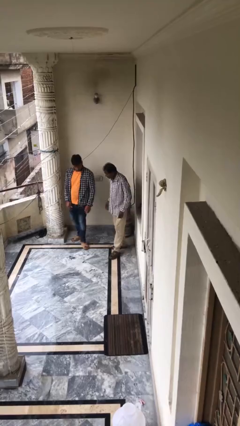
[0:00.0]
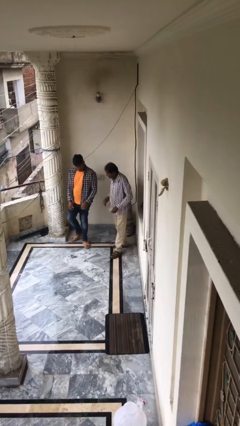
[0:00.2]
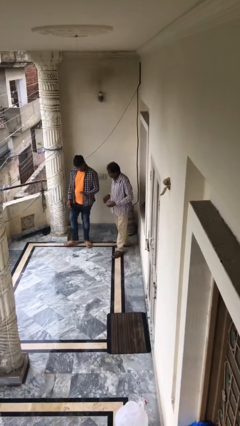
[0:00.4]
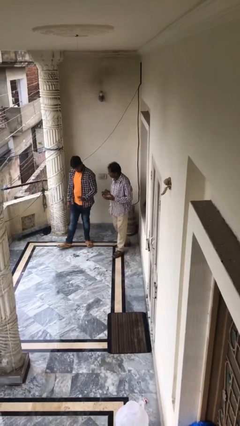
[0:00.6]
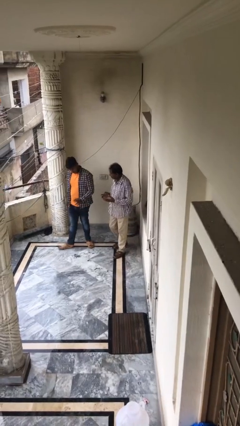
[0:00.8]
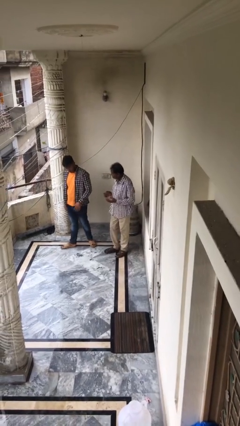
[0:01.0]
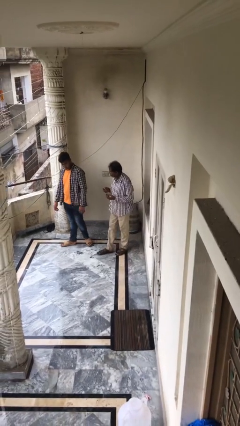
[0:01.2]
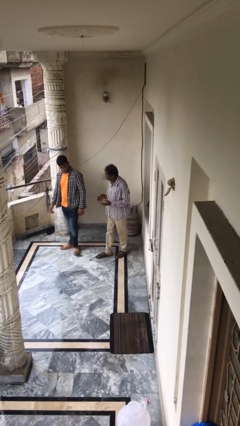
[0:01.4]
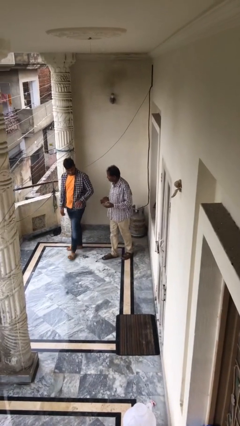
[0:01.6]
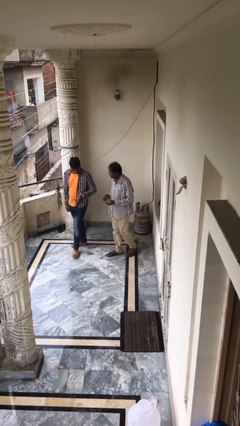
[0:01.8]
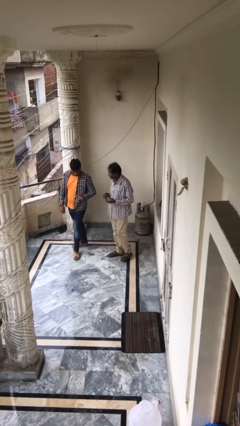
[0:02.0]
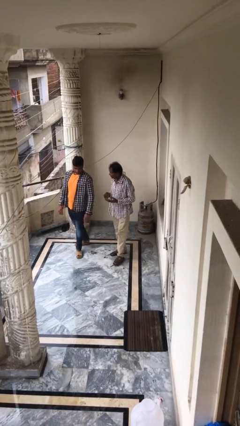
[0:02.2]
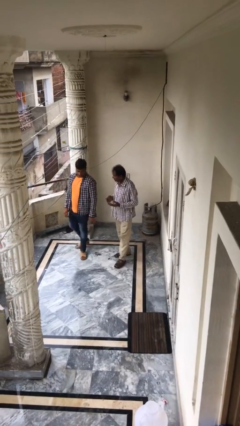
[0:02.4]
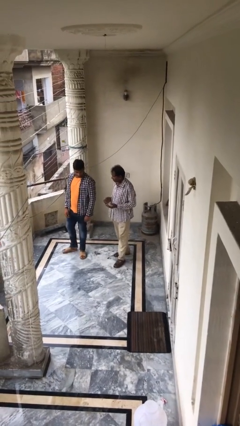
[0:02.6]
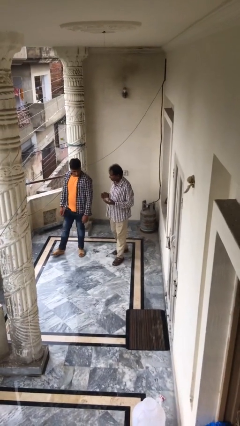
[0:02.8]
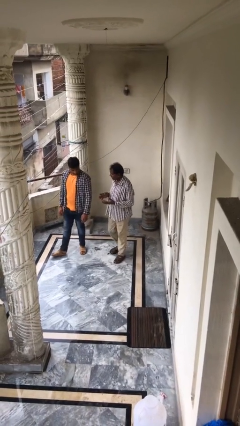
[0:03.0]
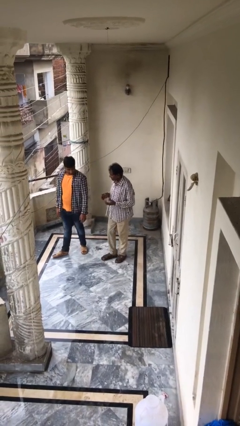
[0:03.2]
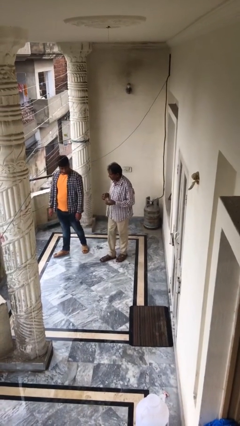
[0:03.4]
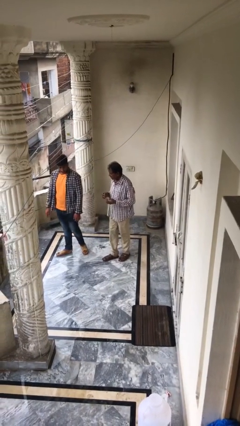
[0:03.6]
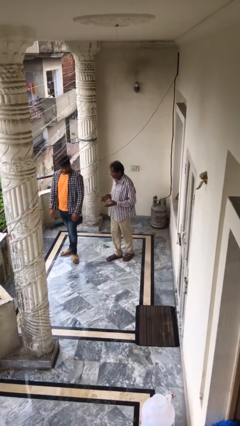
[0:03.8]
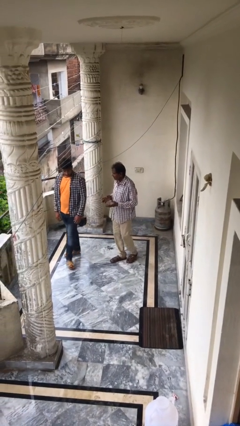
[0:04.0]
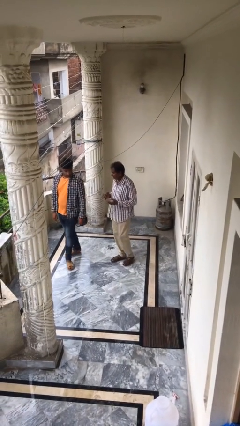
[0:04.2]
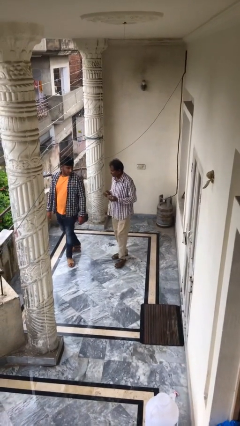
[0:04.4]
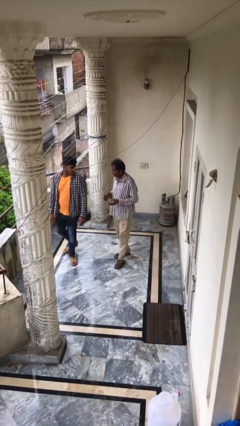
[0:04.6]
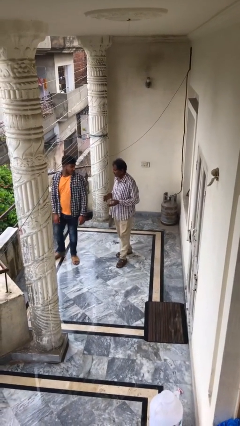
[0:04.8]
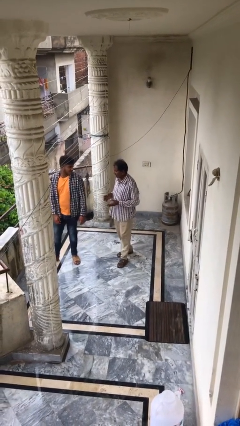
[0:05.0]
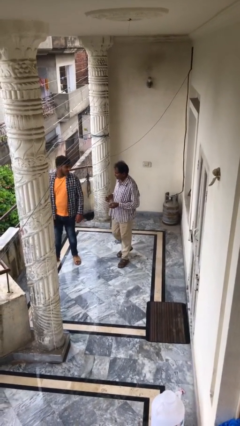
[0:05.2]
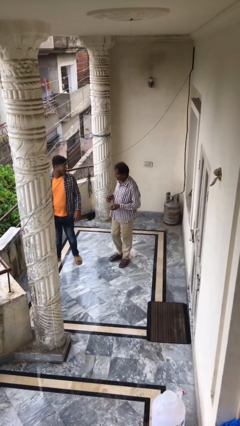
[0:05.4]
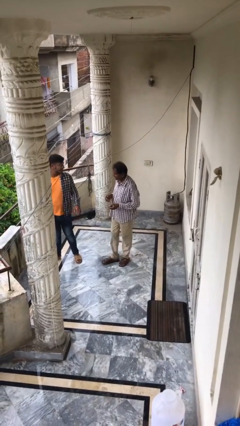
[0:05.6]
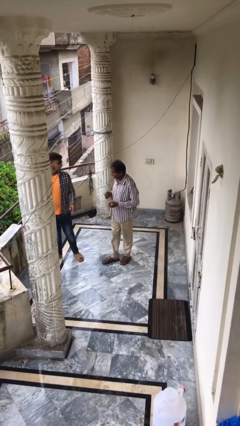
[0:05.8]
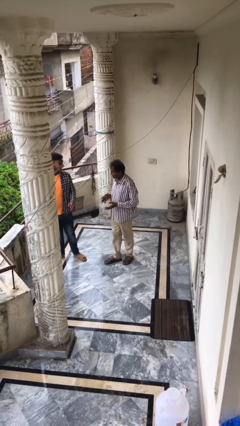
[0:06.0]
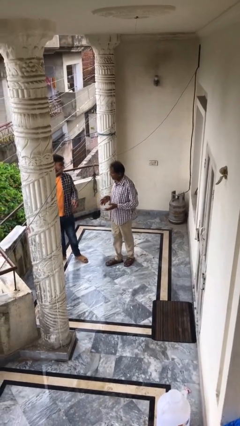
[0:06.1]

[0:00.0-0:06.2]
person talks to person

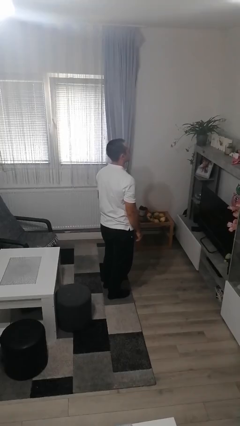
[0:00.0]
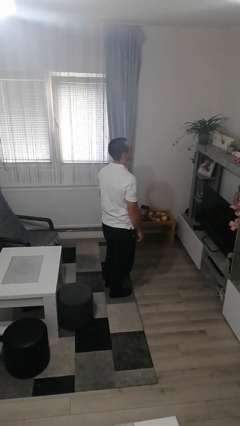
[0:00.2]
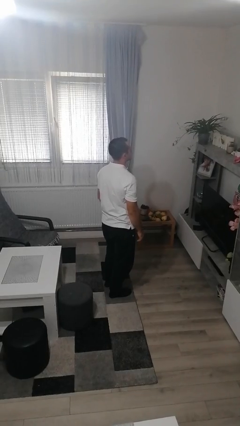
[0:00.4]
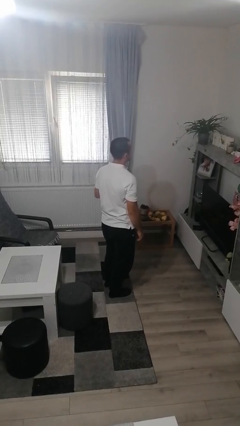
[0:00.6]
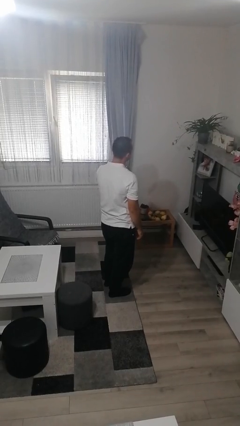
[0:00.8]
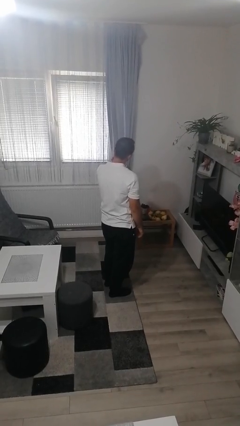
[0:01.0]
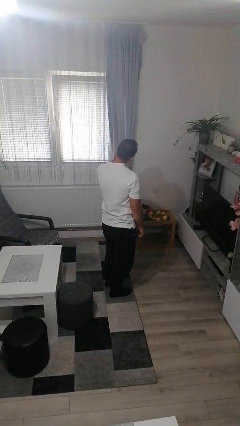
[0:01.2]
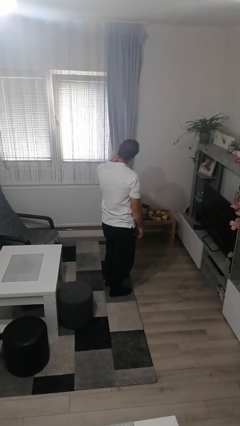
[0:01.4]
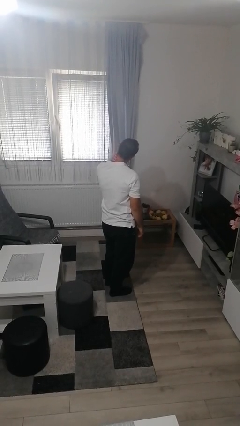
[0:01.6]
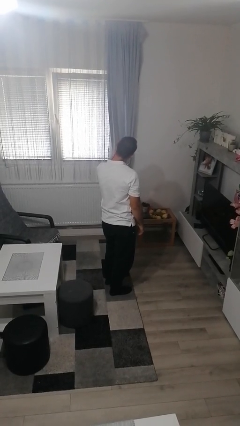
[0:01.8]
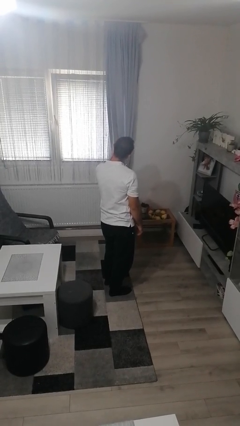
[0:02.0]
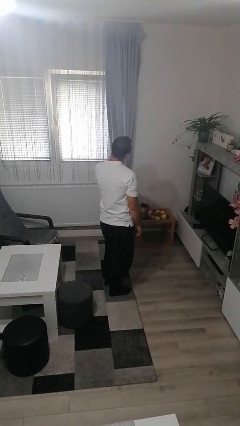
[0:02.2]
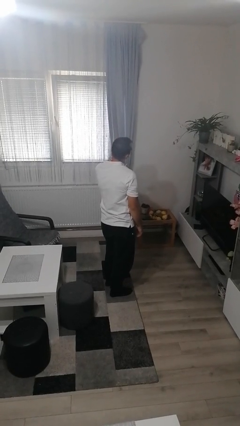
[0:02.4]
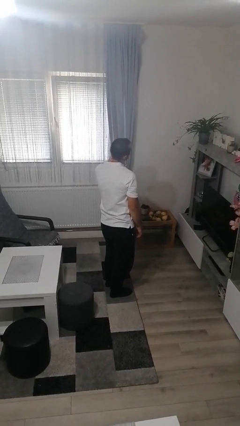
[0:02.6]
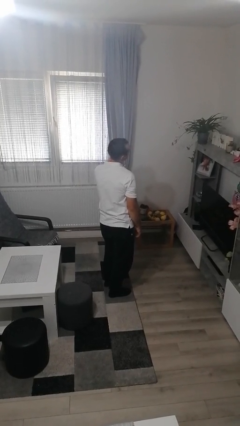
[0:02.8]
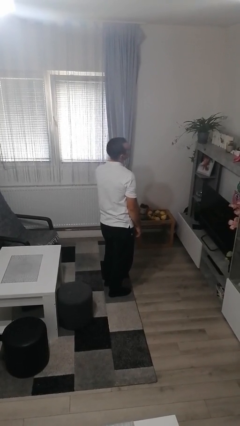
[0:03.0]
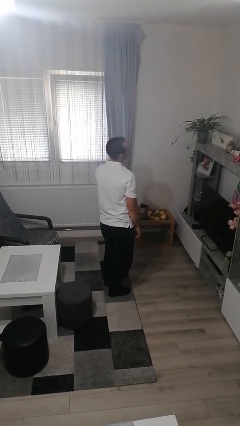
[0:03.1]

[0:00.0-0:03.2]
person rubs neck

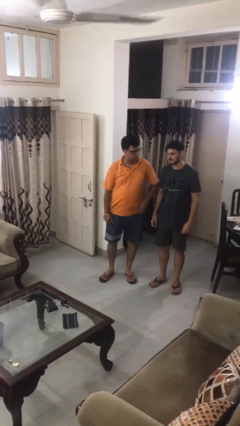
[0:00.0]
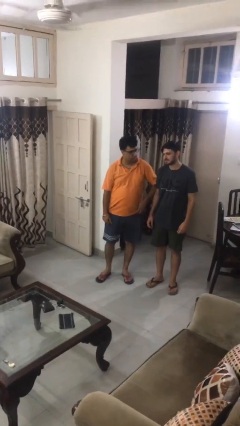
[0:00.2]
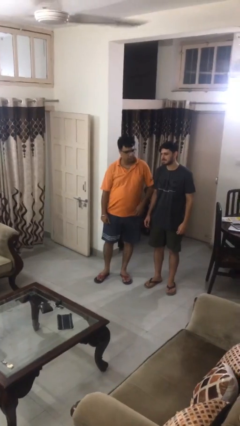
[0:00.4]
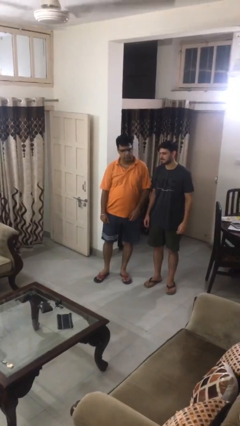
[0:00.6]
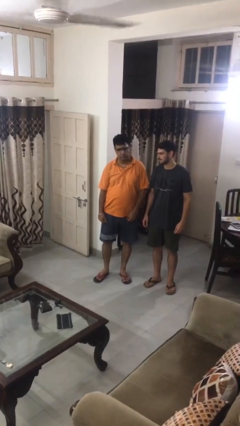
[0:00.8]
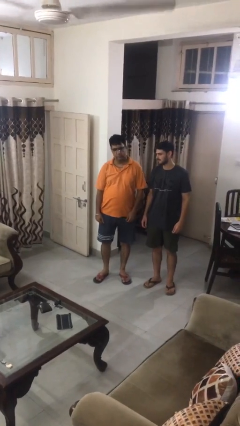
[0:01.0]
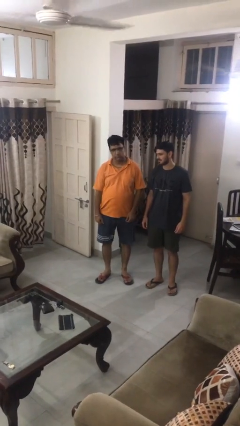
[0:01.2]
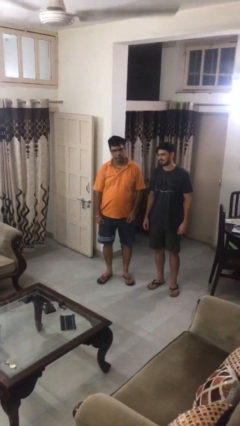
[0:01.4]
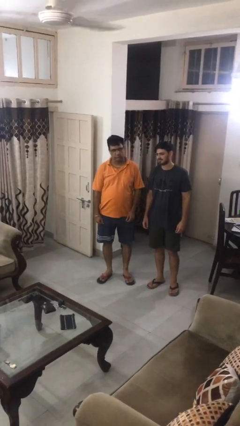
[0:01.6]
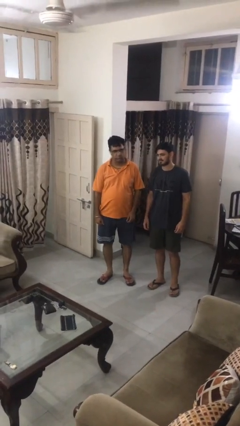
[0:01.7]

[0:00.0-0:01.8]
person nudges person with elbow

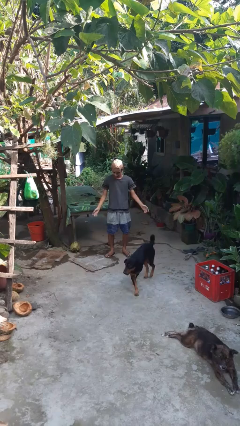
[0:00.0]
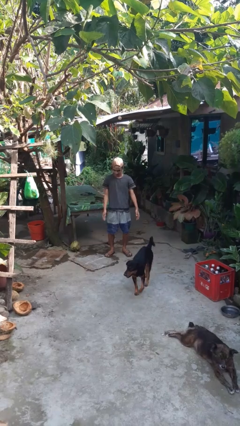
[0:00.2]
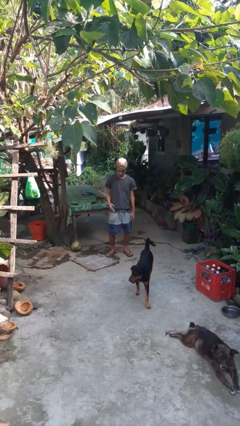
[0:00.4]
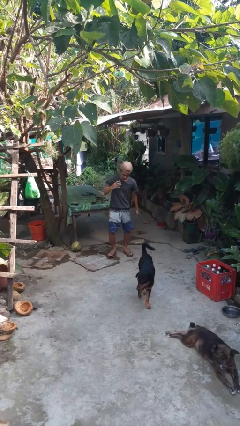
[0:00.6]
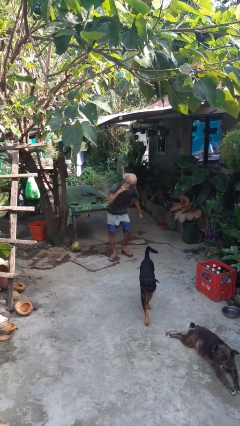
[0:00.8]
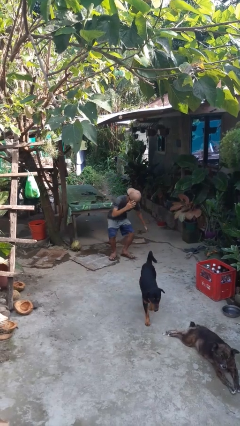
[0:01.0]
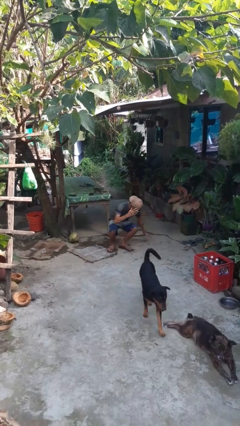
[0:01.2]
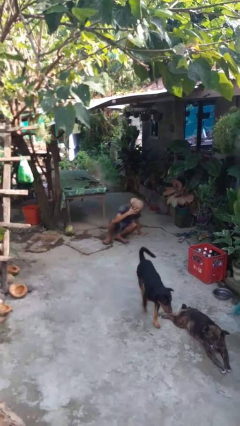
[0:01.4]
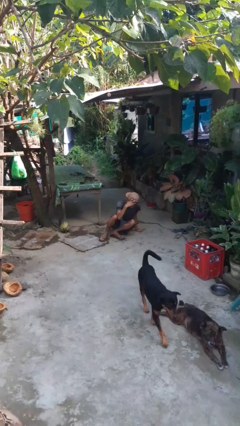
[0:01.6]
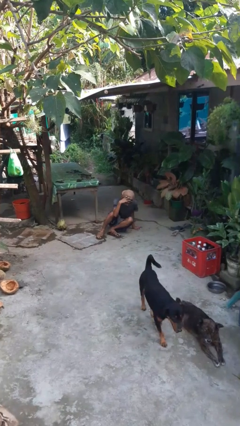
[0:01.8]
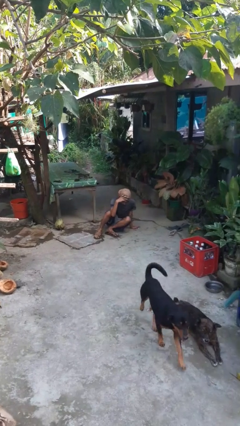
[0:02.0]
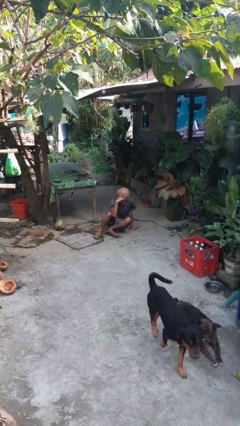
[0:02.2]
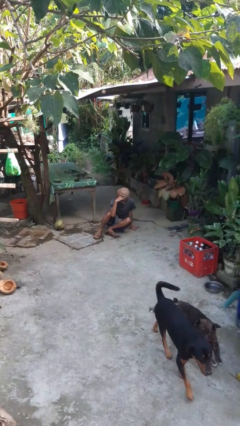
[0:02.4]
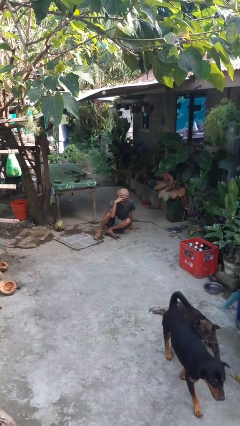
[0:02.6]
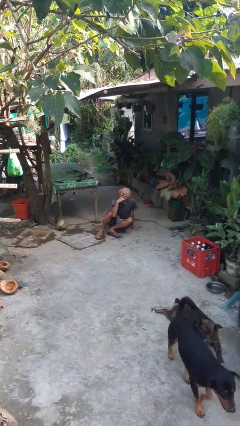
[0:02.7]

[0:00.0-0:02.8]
person falls while standing

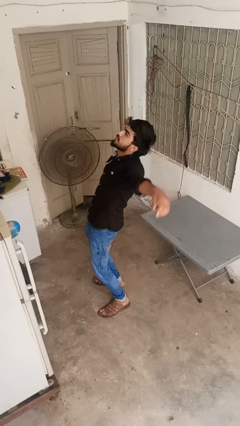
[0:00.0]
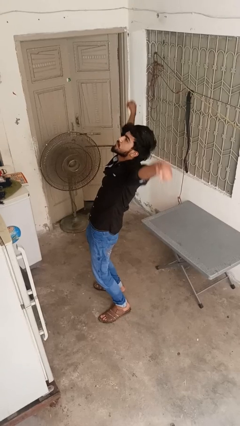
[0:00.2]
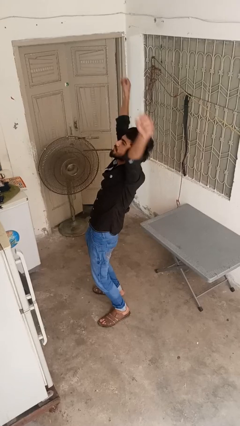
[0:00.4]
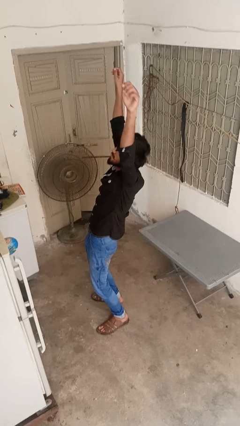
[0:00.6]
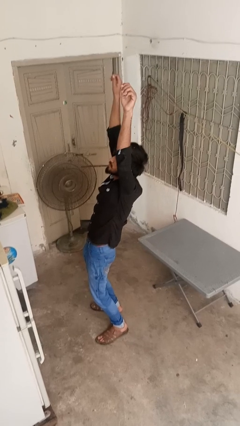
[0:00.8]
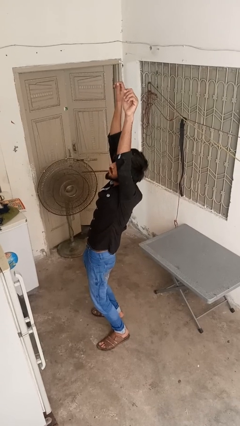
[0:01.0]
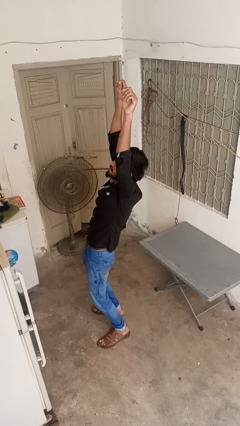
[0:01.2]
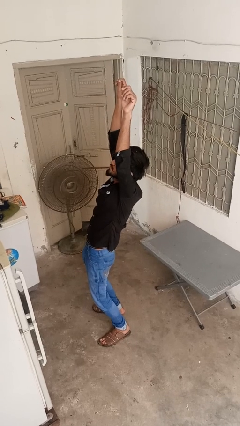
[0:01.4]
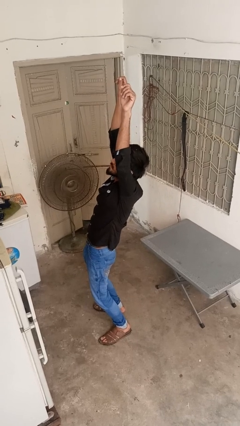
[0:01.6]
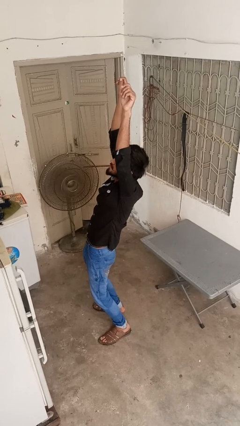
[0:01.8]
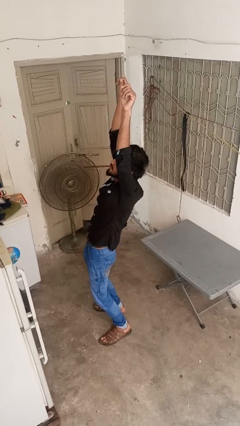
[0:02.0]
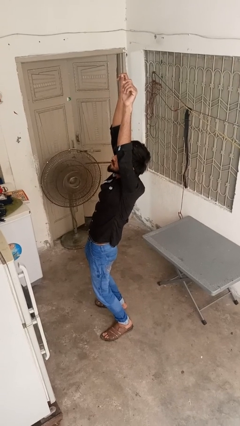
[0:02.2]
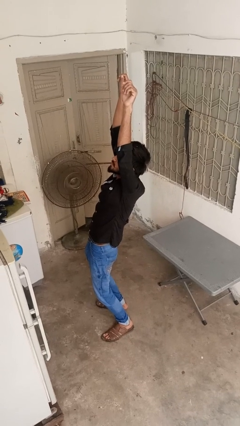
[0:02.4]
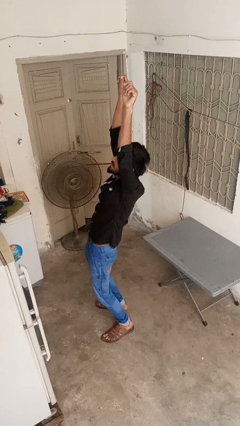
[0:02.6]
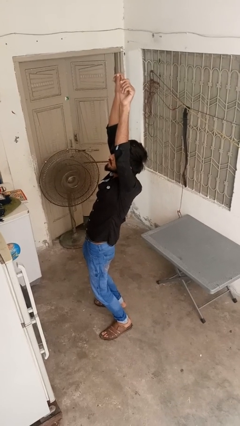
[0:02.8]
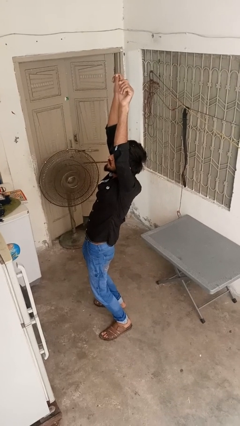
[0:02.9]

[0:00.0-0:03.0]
person stretches arms over head

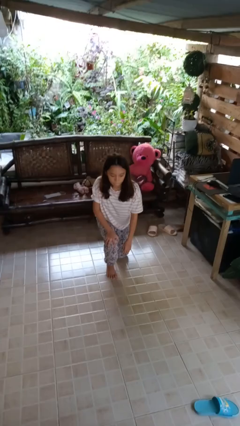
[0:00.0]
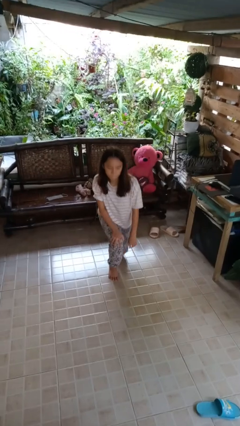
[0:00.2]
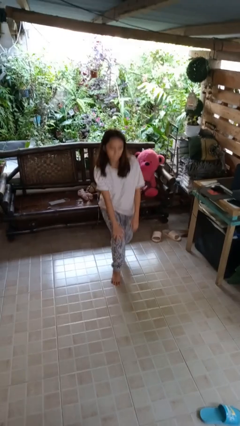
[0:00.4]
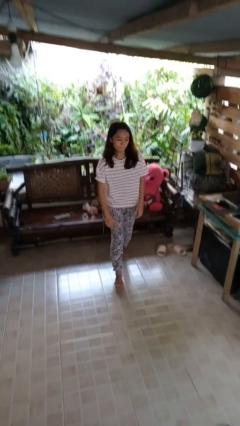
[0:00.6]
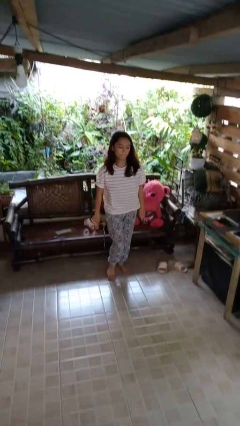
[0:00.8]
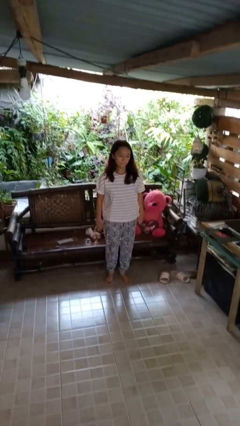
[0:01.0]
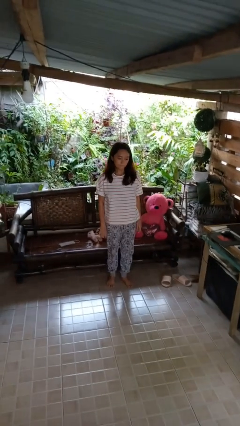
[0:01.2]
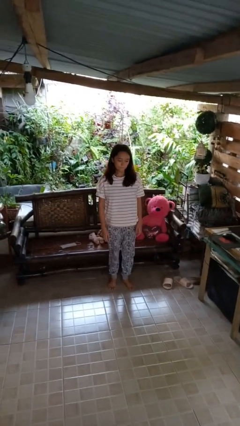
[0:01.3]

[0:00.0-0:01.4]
person stands up from floor
